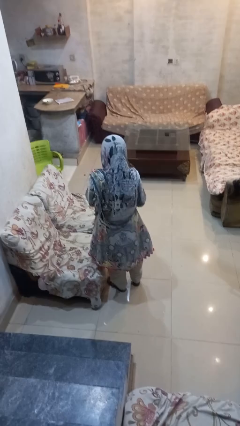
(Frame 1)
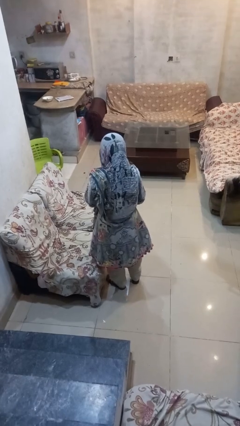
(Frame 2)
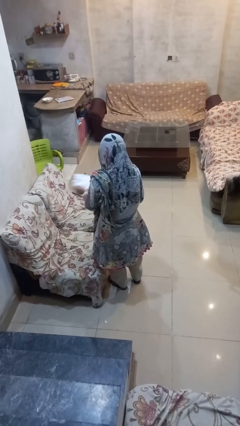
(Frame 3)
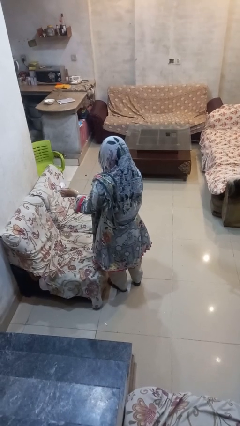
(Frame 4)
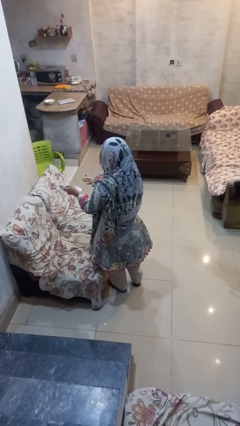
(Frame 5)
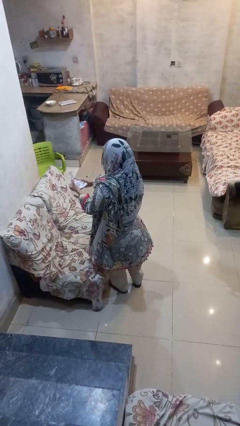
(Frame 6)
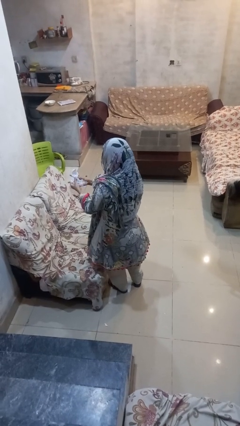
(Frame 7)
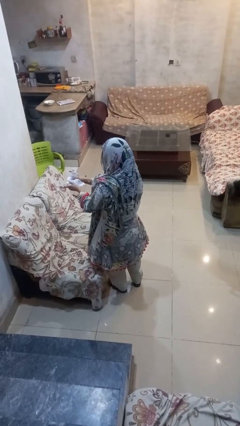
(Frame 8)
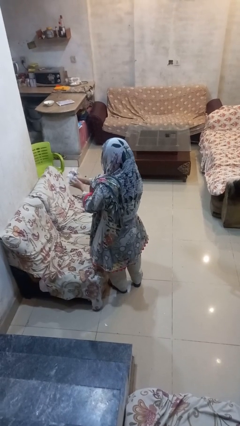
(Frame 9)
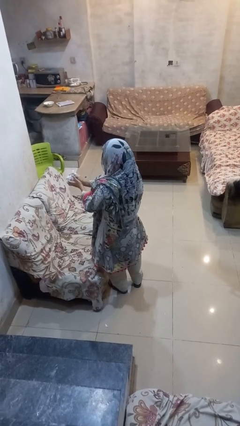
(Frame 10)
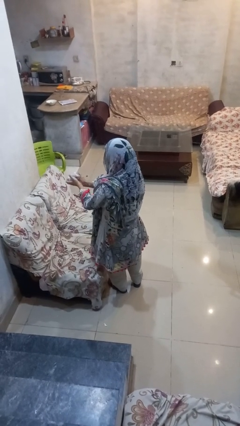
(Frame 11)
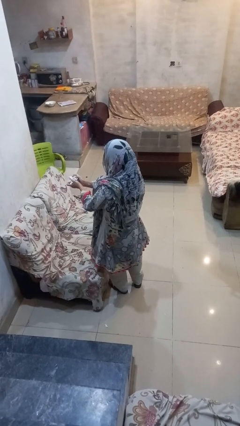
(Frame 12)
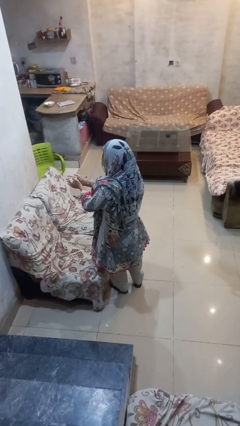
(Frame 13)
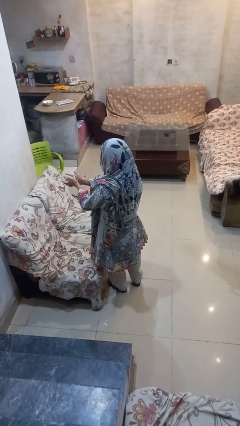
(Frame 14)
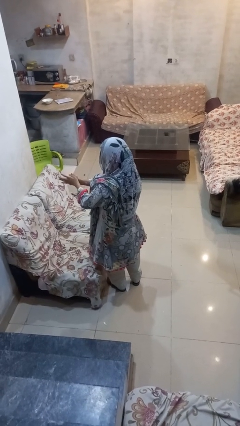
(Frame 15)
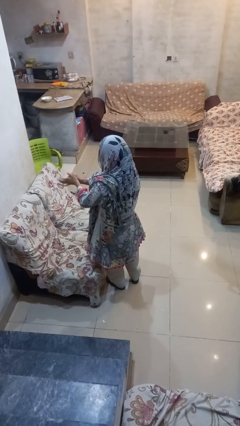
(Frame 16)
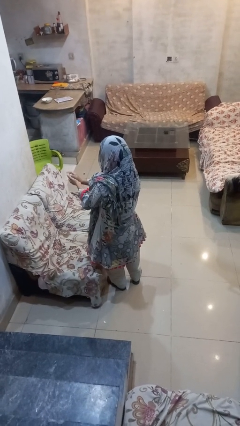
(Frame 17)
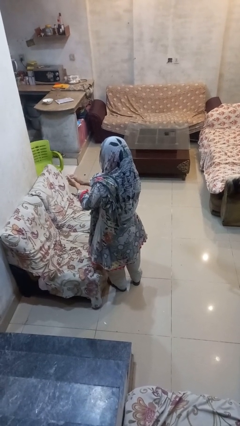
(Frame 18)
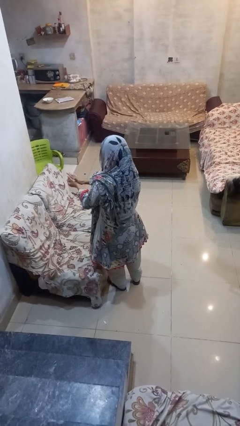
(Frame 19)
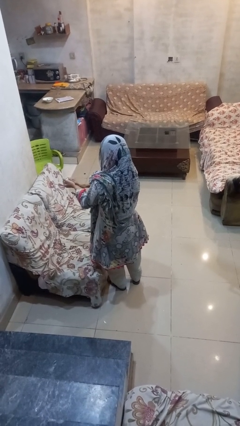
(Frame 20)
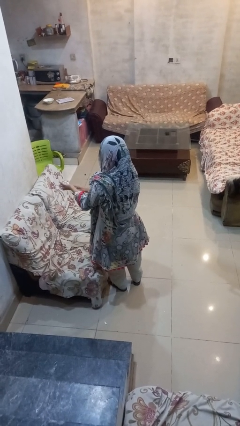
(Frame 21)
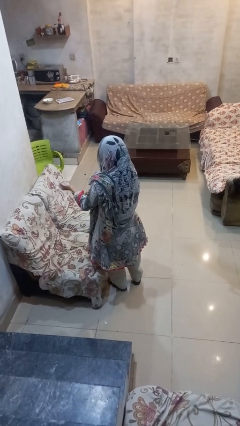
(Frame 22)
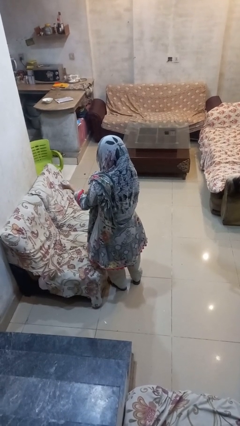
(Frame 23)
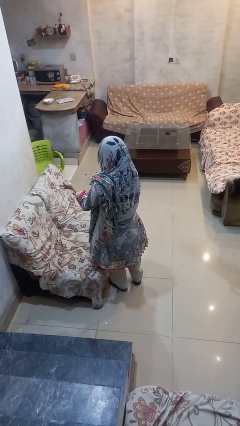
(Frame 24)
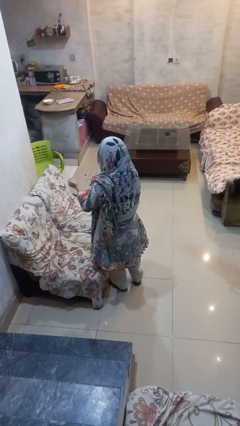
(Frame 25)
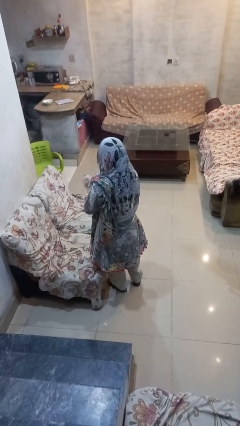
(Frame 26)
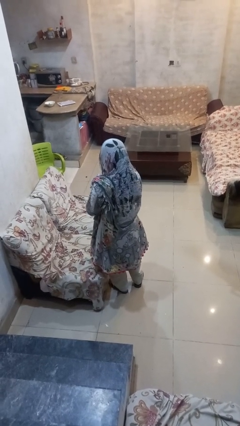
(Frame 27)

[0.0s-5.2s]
person crumples paper

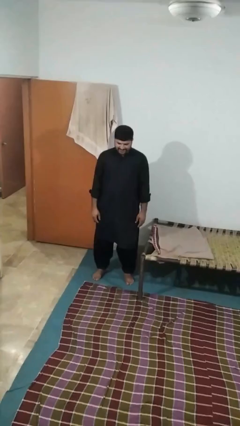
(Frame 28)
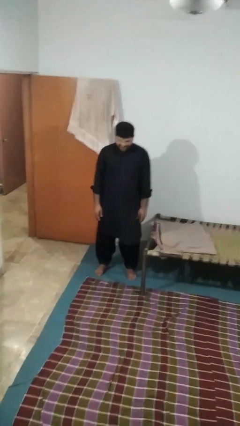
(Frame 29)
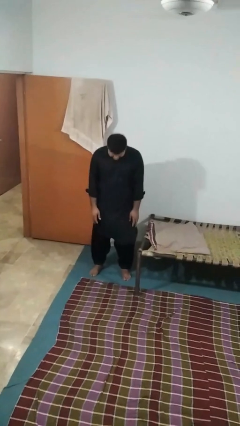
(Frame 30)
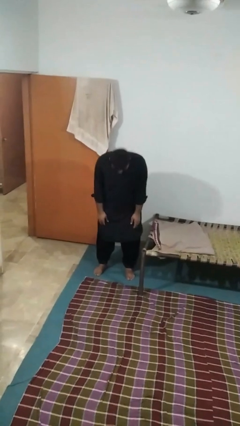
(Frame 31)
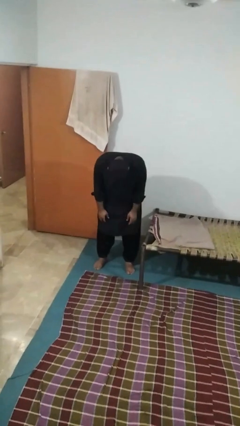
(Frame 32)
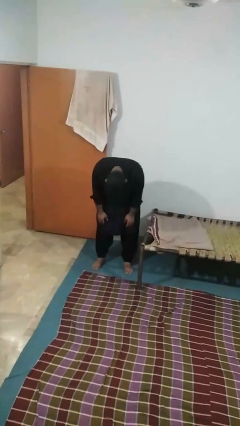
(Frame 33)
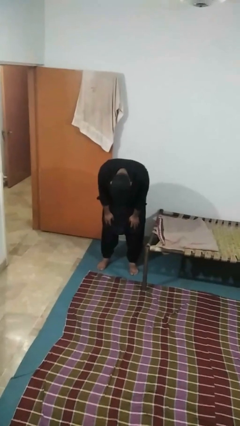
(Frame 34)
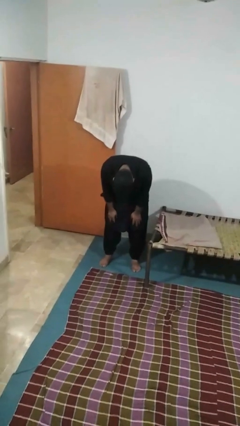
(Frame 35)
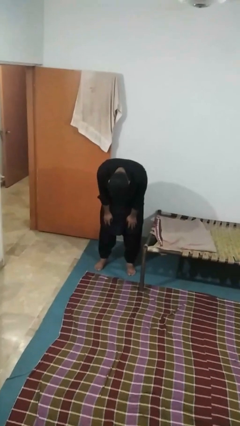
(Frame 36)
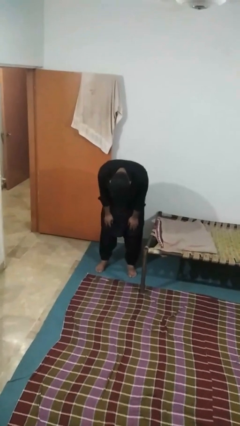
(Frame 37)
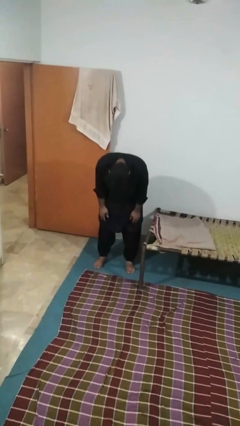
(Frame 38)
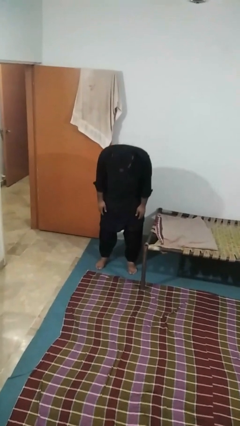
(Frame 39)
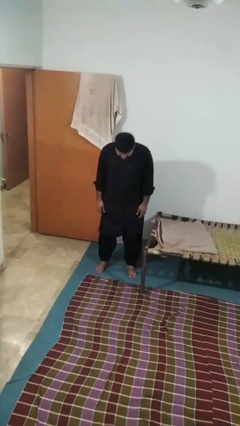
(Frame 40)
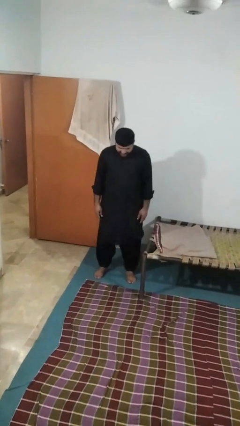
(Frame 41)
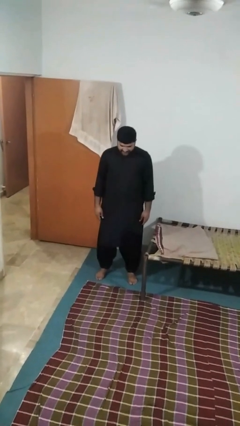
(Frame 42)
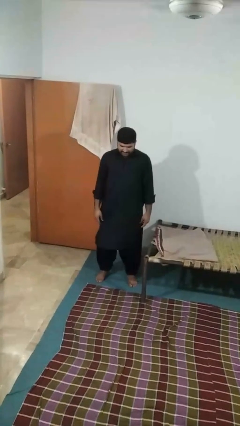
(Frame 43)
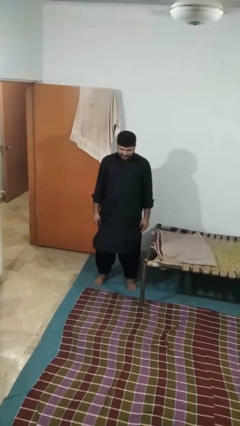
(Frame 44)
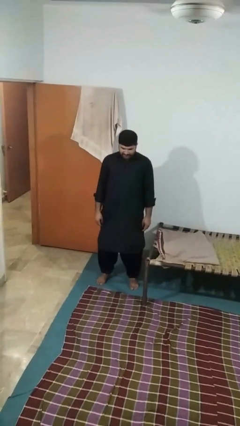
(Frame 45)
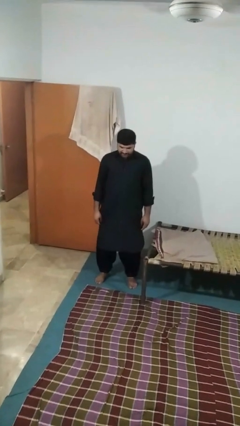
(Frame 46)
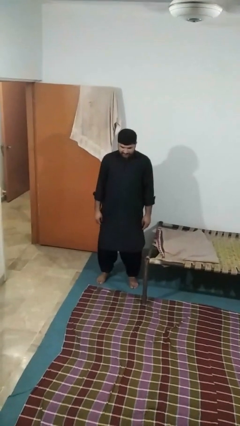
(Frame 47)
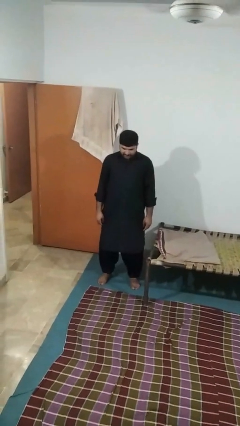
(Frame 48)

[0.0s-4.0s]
person bows

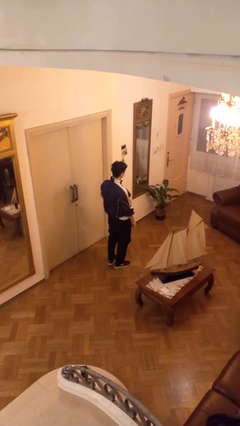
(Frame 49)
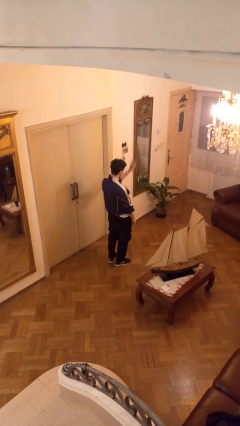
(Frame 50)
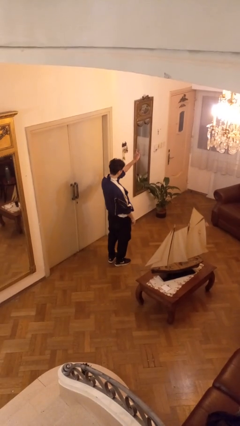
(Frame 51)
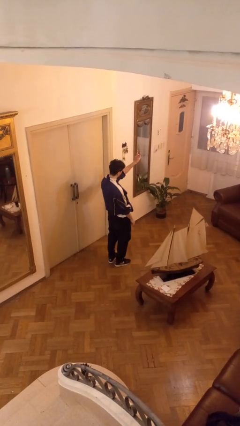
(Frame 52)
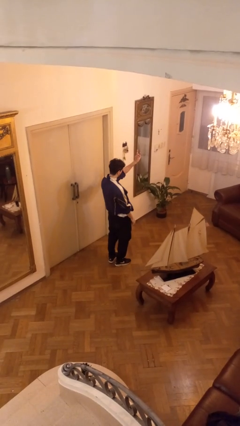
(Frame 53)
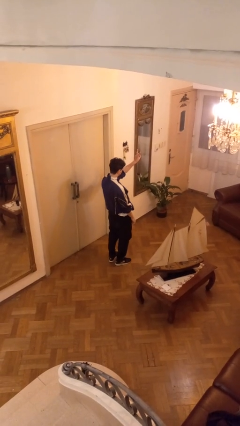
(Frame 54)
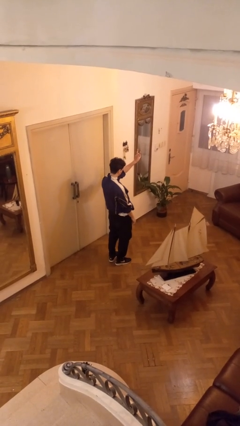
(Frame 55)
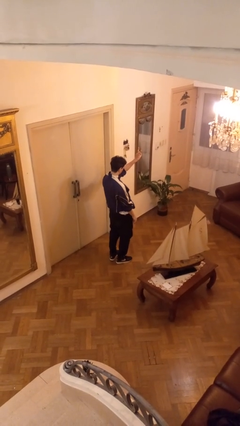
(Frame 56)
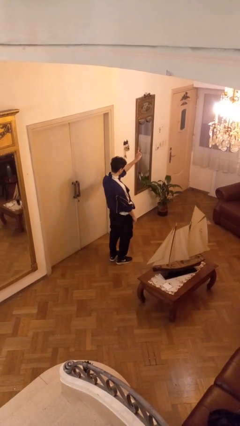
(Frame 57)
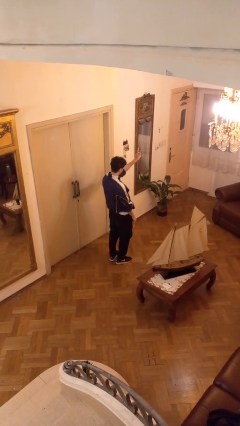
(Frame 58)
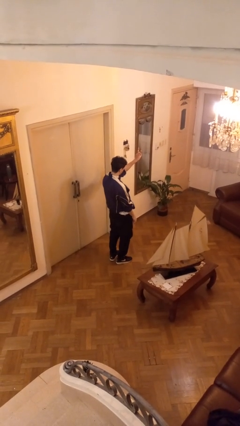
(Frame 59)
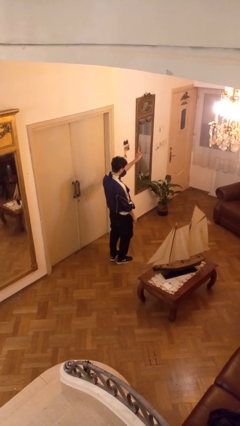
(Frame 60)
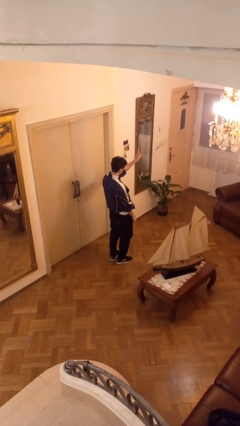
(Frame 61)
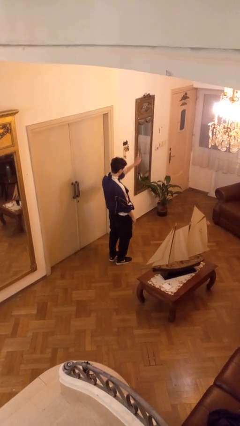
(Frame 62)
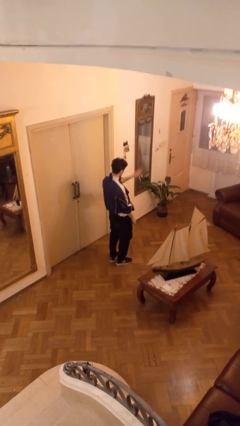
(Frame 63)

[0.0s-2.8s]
person gestures peace

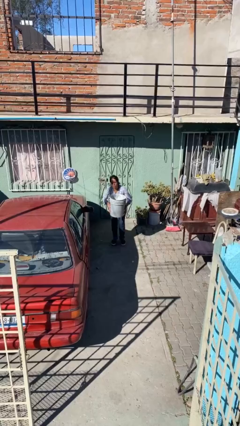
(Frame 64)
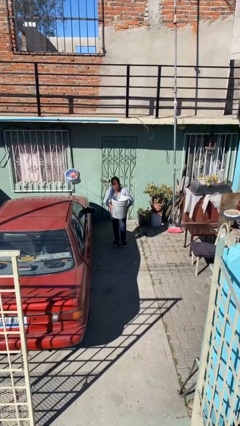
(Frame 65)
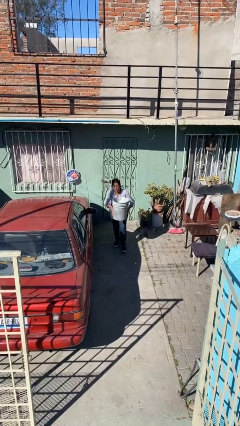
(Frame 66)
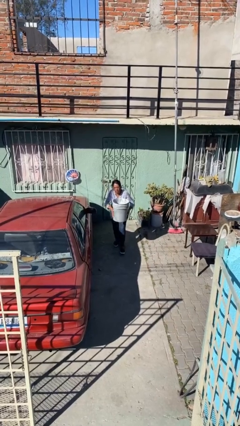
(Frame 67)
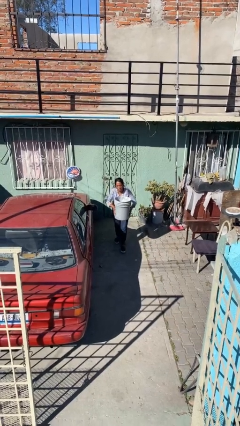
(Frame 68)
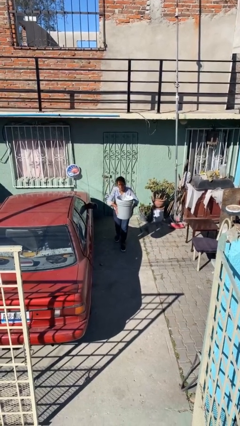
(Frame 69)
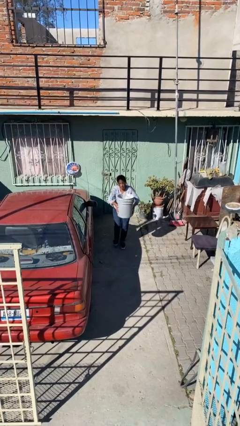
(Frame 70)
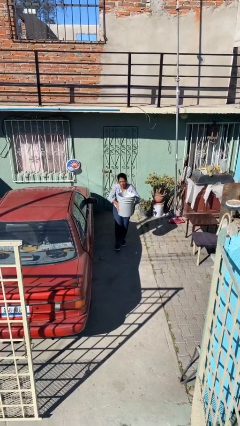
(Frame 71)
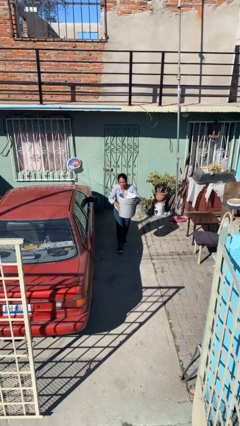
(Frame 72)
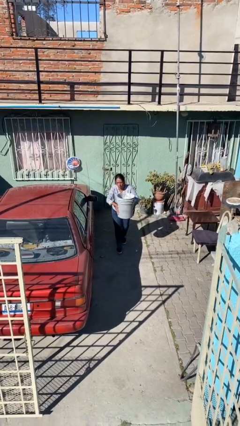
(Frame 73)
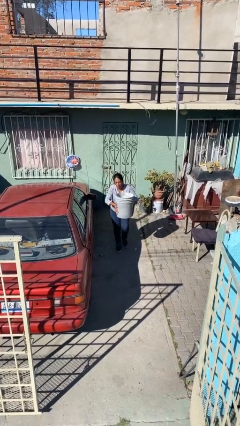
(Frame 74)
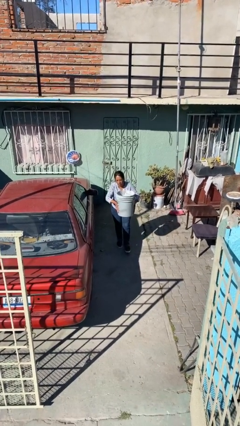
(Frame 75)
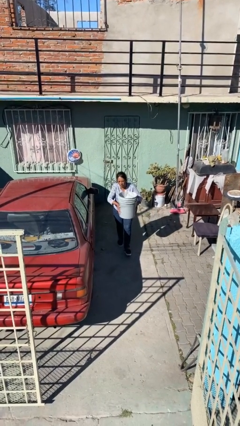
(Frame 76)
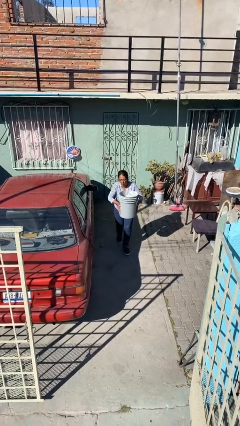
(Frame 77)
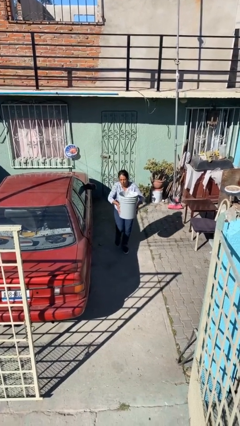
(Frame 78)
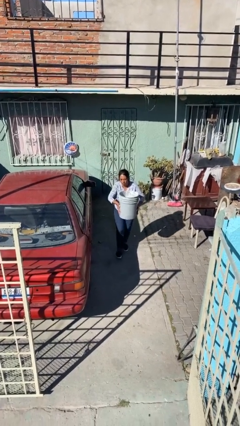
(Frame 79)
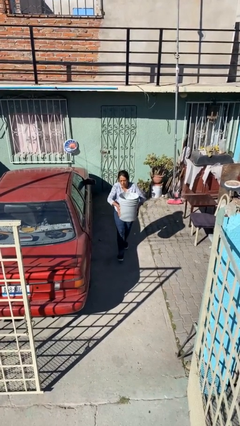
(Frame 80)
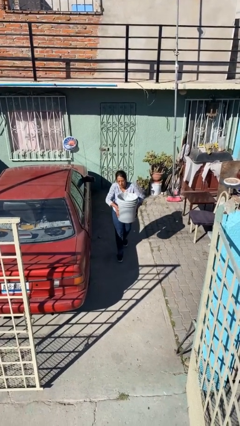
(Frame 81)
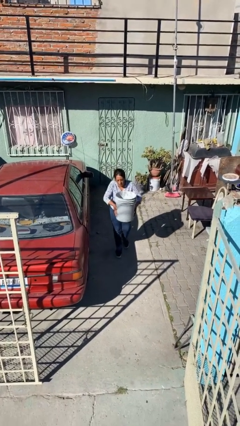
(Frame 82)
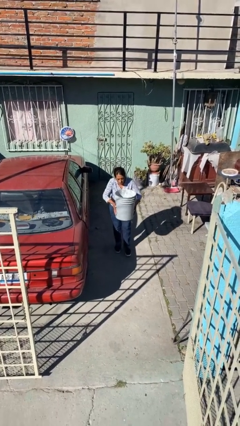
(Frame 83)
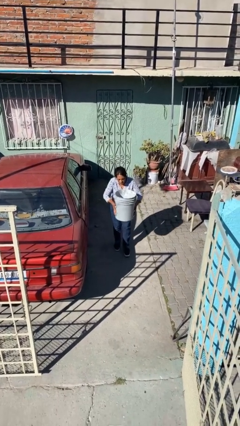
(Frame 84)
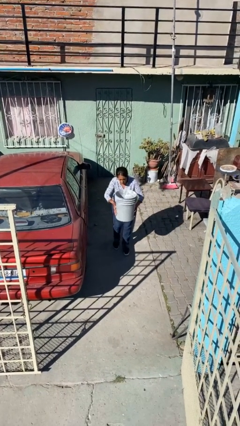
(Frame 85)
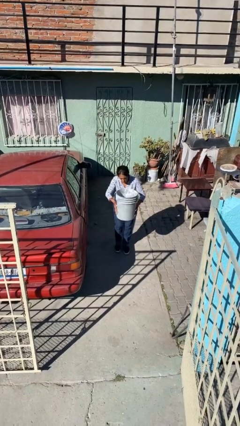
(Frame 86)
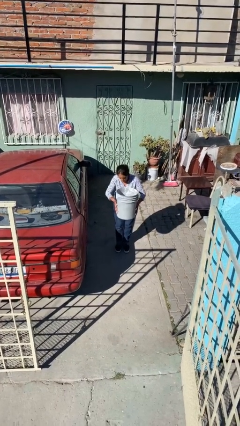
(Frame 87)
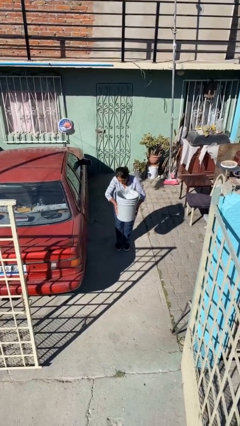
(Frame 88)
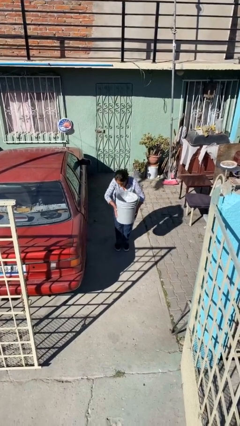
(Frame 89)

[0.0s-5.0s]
person carries heavy object

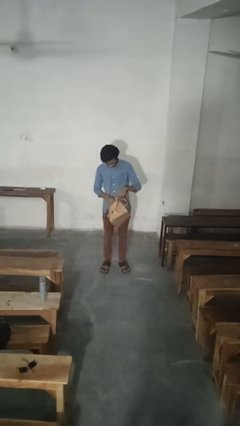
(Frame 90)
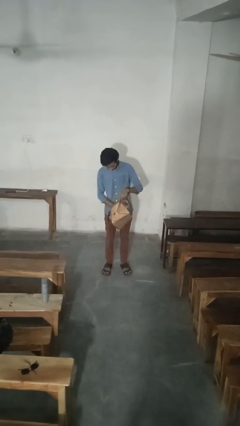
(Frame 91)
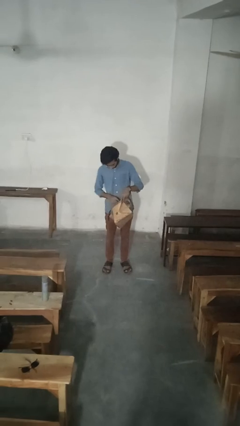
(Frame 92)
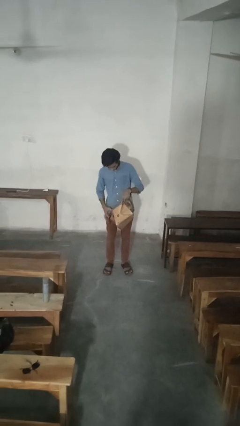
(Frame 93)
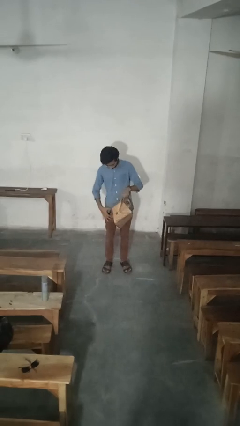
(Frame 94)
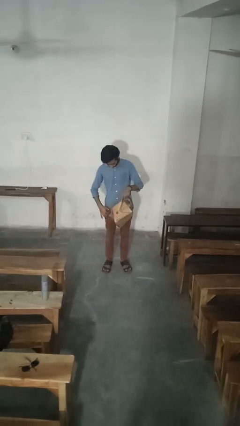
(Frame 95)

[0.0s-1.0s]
person puts object into purse
